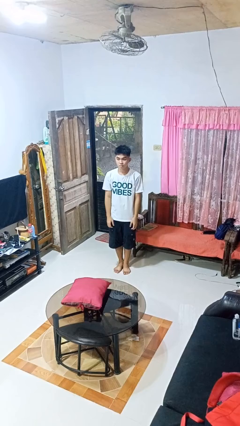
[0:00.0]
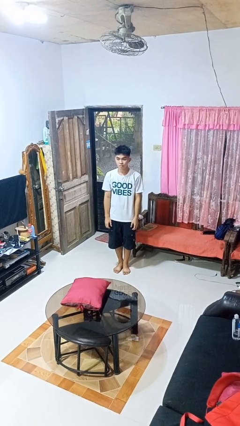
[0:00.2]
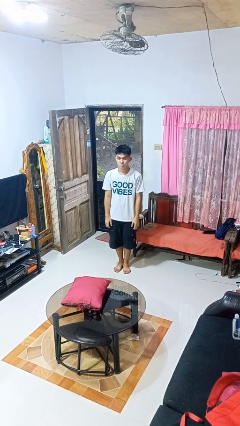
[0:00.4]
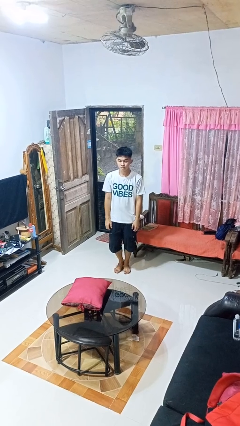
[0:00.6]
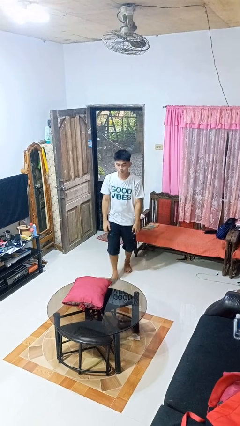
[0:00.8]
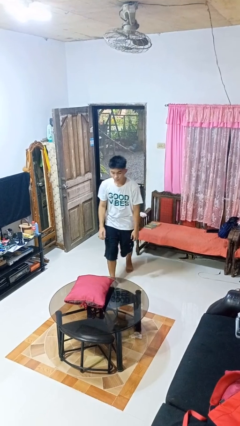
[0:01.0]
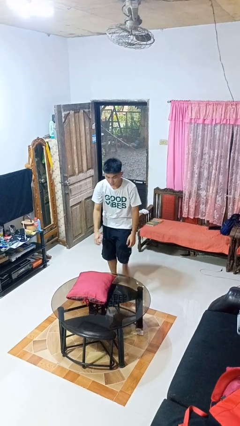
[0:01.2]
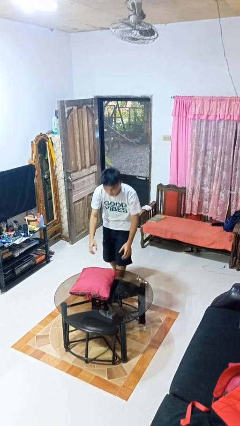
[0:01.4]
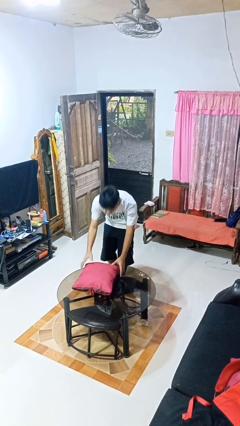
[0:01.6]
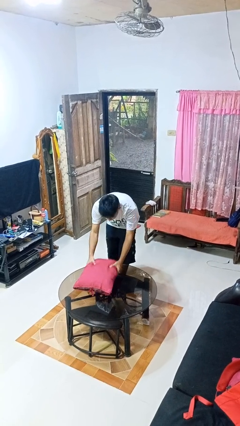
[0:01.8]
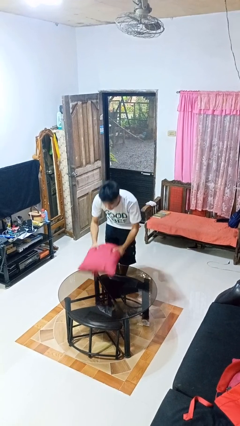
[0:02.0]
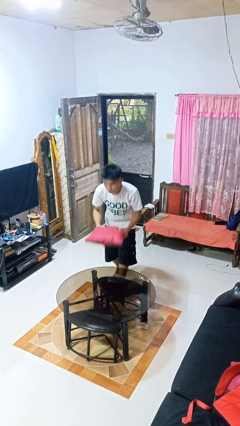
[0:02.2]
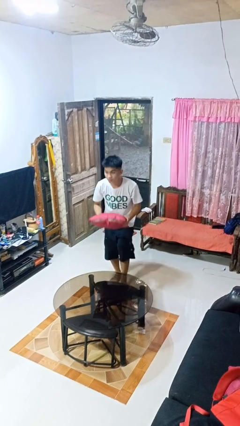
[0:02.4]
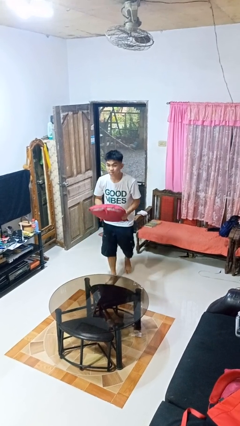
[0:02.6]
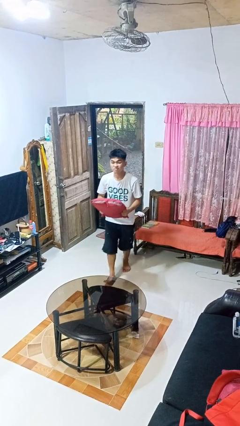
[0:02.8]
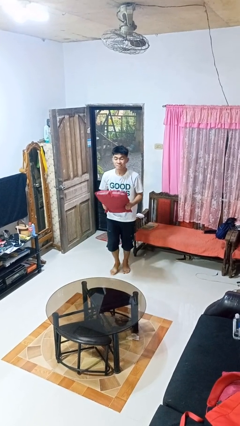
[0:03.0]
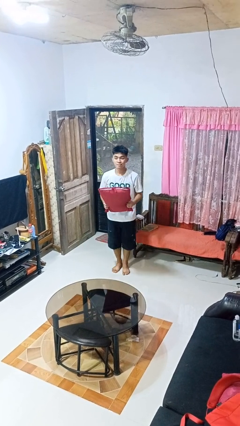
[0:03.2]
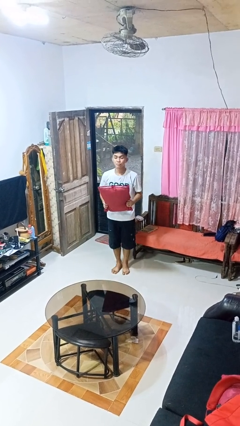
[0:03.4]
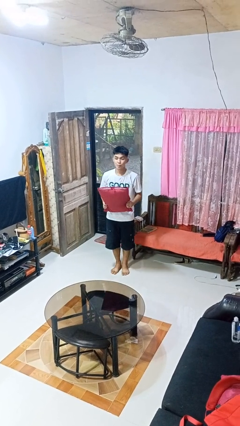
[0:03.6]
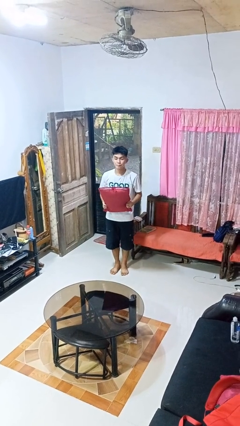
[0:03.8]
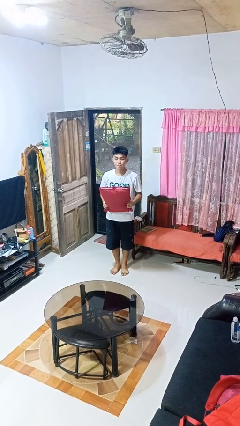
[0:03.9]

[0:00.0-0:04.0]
person picks up object from table

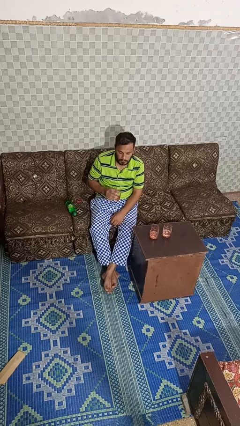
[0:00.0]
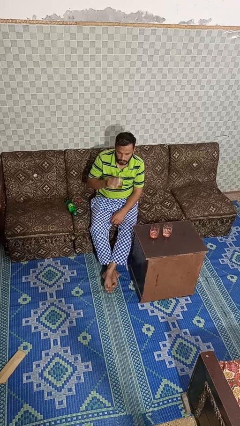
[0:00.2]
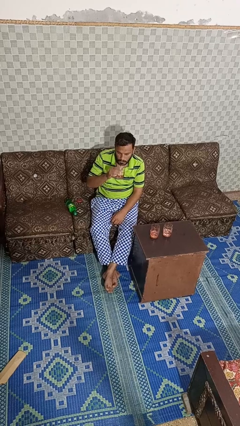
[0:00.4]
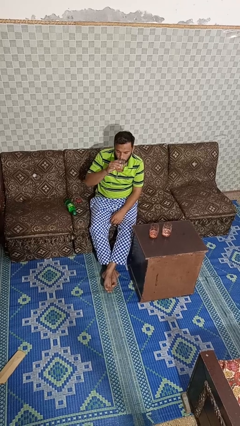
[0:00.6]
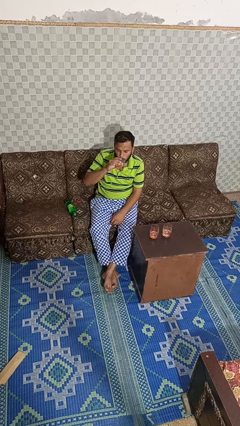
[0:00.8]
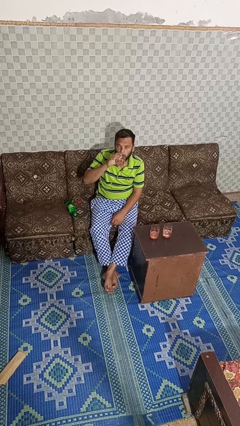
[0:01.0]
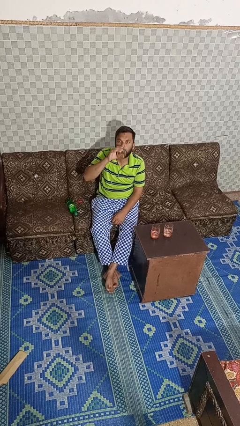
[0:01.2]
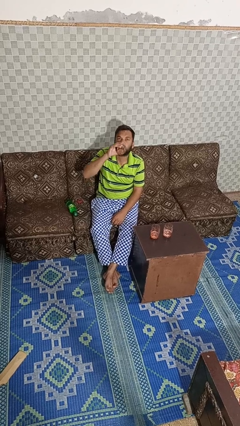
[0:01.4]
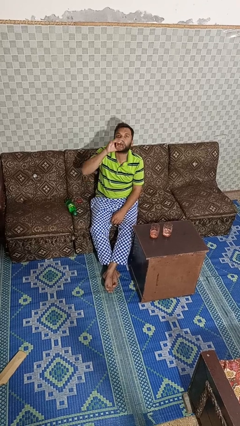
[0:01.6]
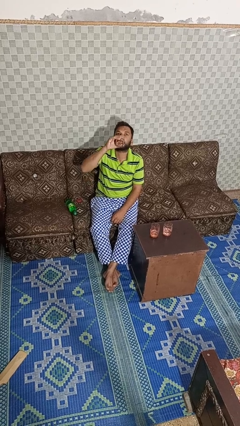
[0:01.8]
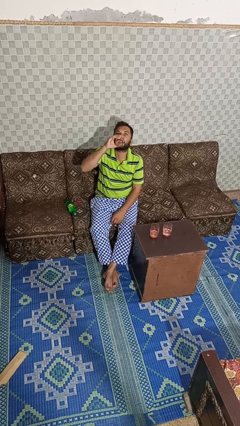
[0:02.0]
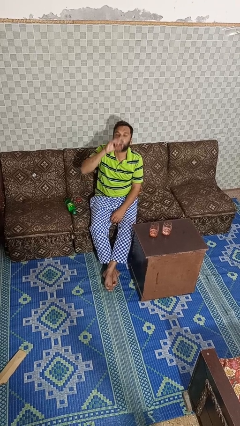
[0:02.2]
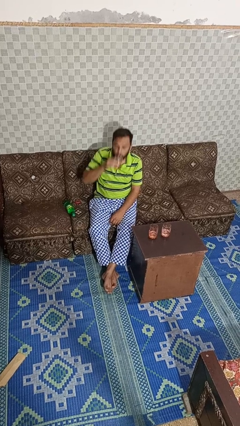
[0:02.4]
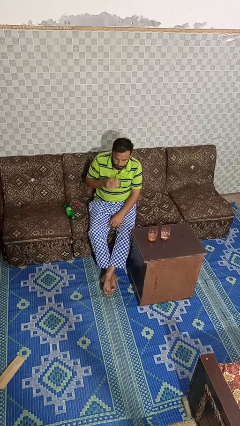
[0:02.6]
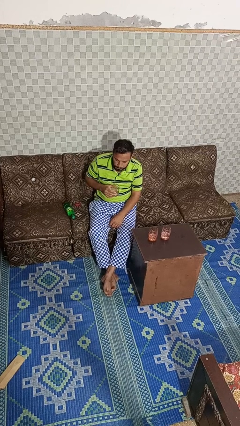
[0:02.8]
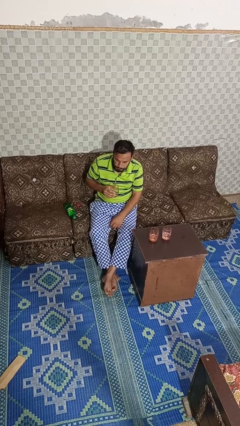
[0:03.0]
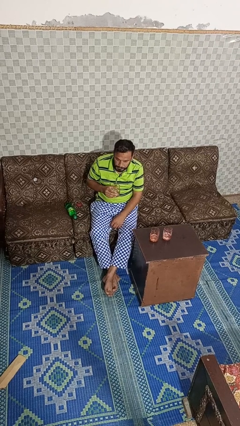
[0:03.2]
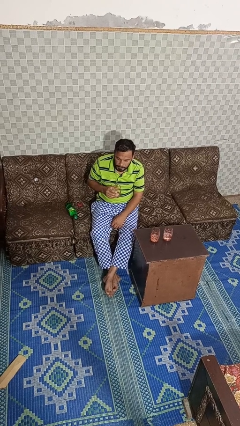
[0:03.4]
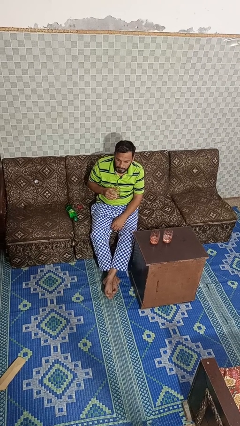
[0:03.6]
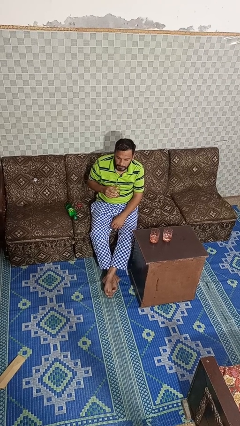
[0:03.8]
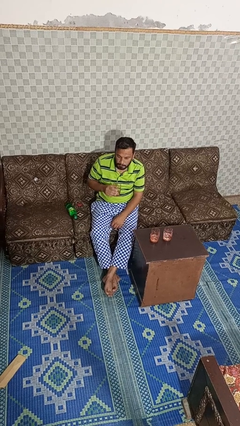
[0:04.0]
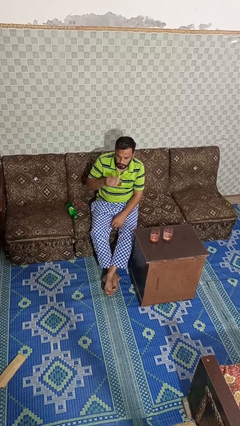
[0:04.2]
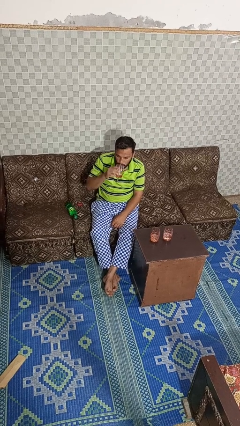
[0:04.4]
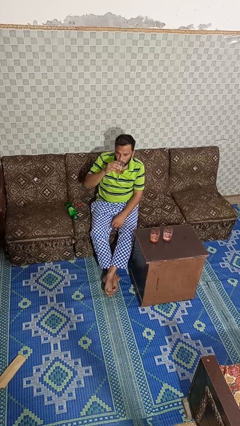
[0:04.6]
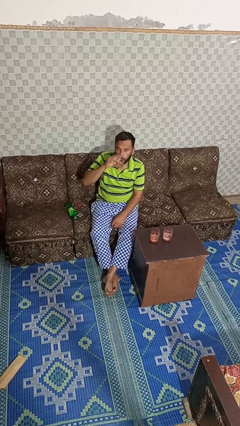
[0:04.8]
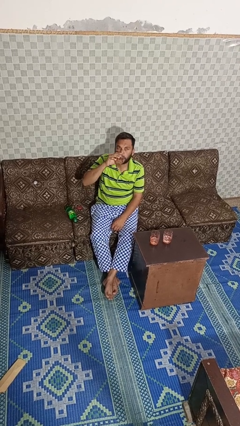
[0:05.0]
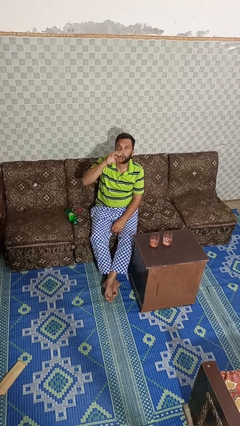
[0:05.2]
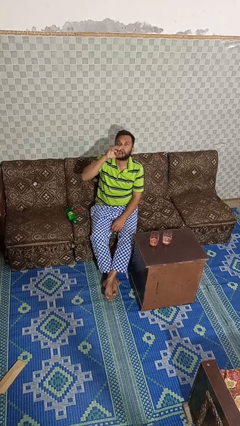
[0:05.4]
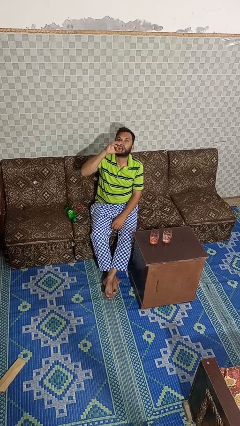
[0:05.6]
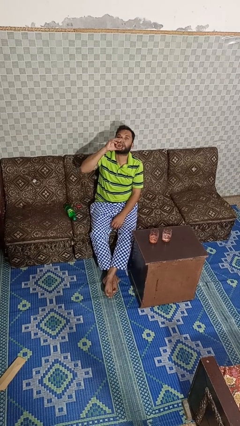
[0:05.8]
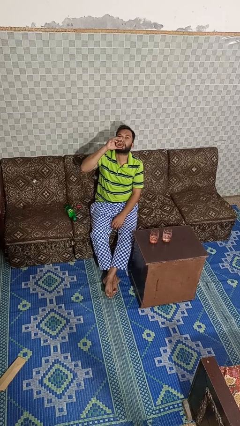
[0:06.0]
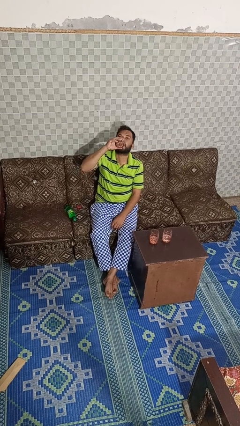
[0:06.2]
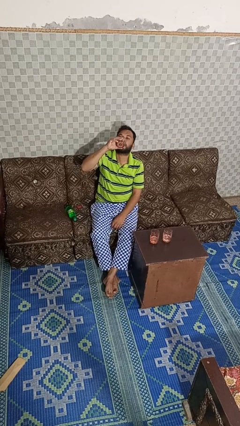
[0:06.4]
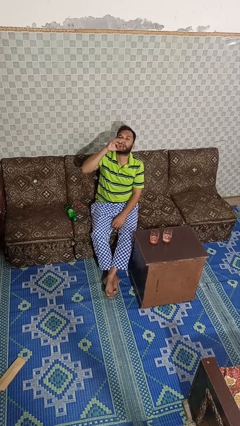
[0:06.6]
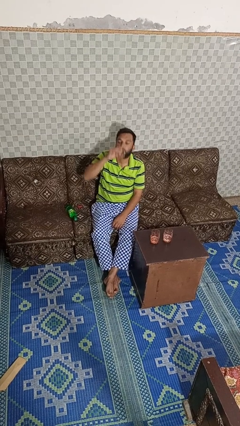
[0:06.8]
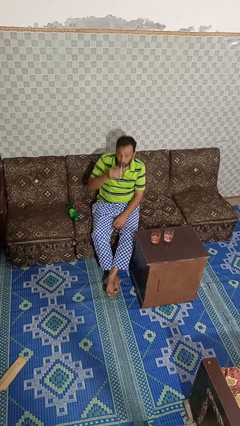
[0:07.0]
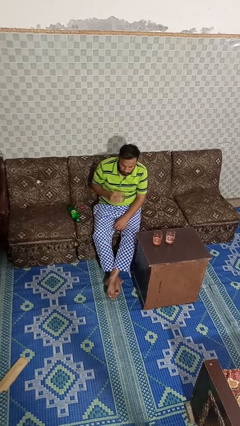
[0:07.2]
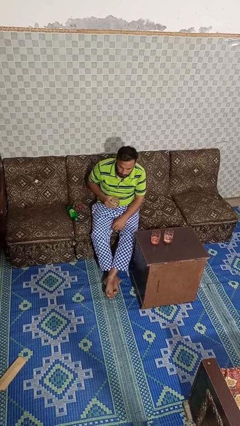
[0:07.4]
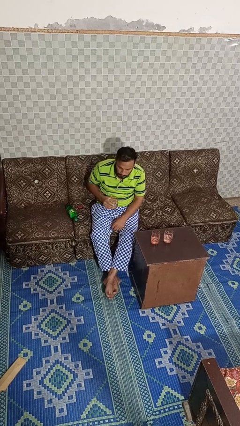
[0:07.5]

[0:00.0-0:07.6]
person drinks from shotglass

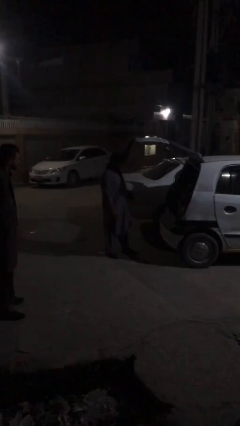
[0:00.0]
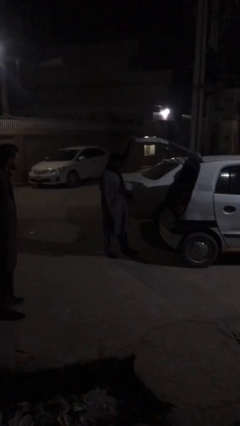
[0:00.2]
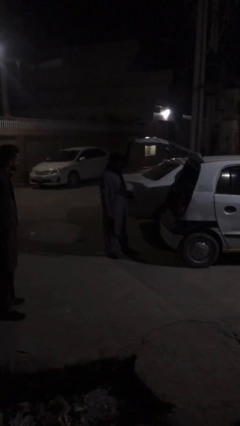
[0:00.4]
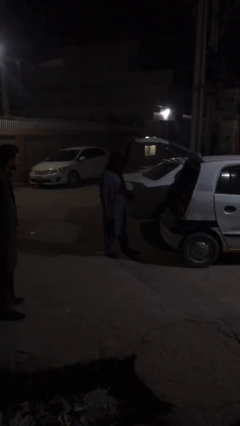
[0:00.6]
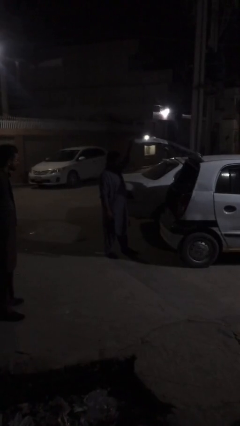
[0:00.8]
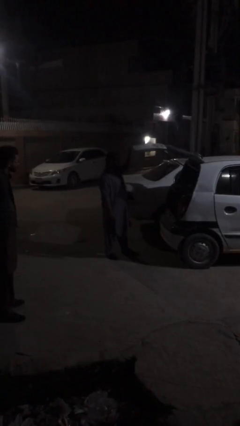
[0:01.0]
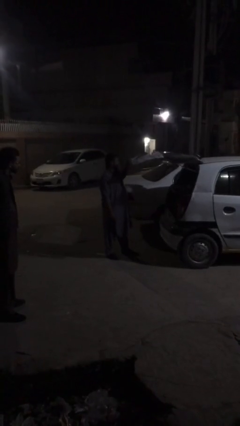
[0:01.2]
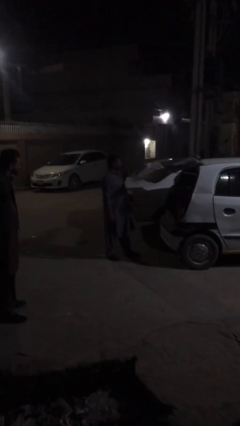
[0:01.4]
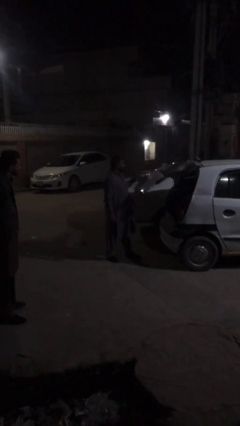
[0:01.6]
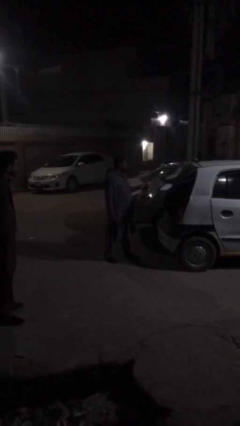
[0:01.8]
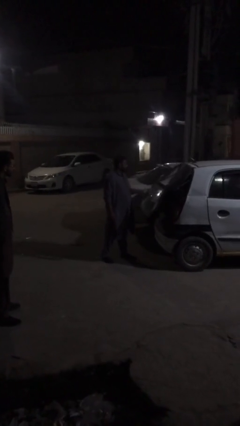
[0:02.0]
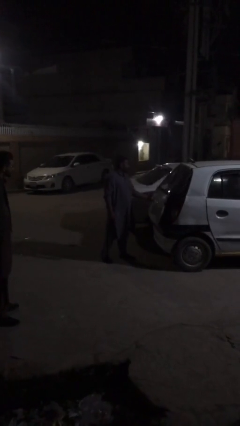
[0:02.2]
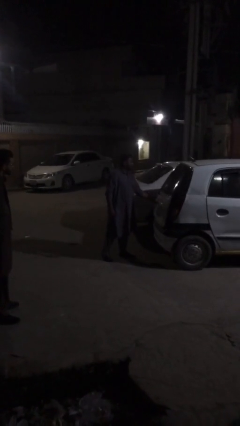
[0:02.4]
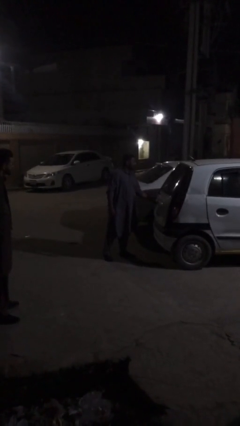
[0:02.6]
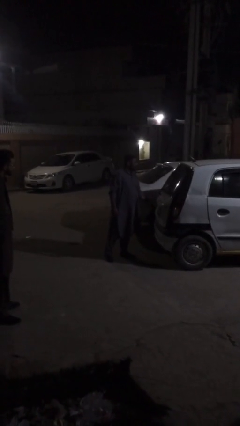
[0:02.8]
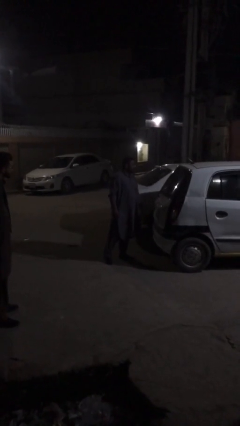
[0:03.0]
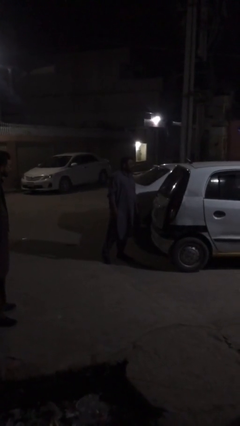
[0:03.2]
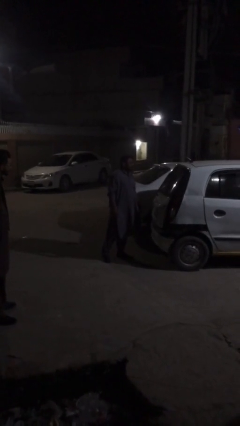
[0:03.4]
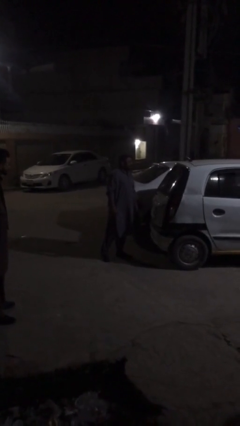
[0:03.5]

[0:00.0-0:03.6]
person closes car trunk

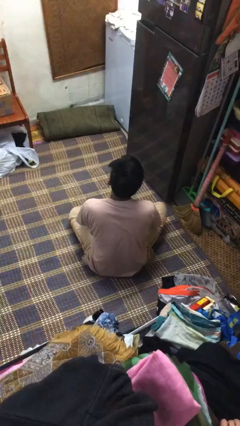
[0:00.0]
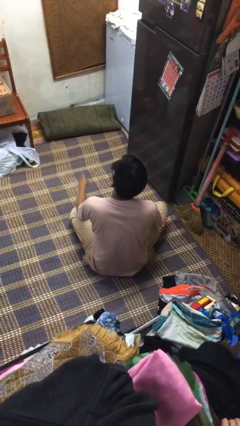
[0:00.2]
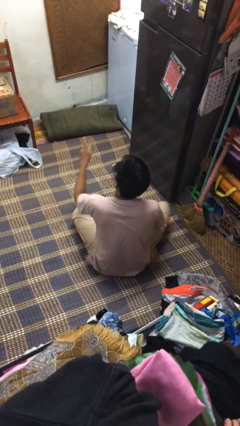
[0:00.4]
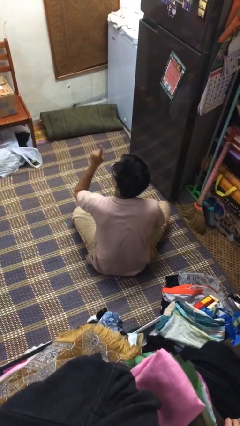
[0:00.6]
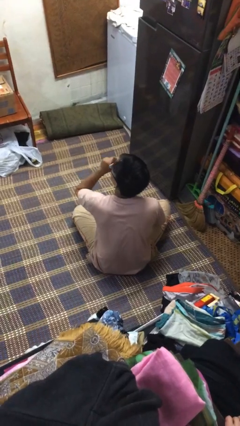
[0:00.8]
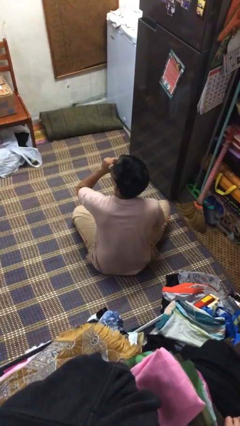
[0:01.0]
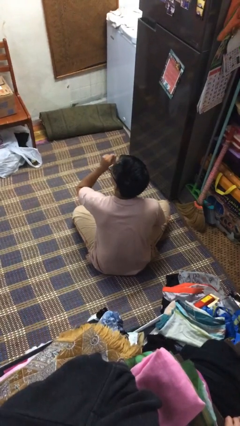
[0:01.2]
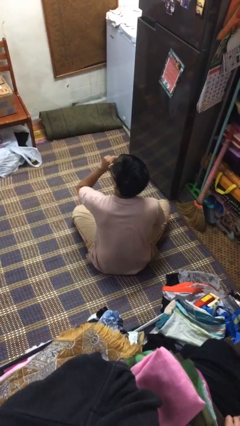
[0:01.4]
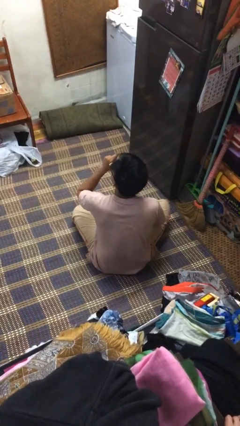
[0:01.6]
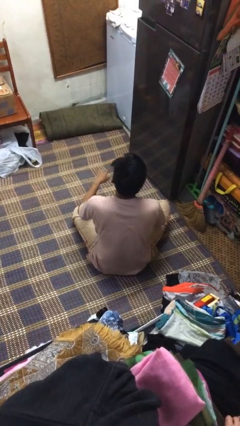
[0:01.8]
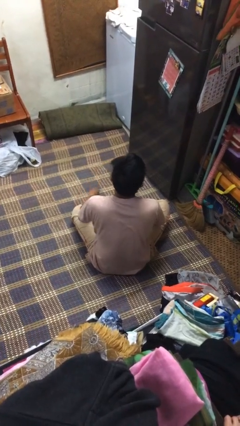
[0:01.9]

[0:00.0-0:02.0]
person gestures be quiet
